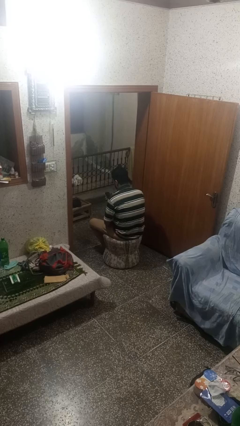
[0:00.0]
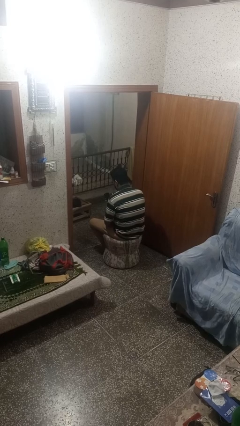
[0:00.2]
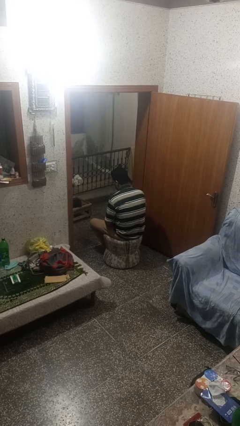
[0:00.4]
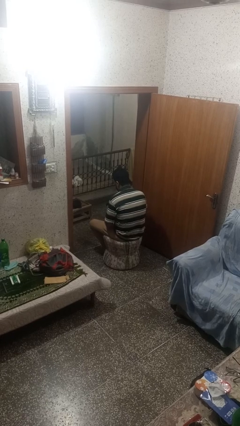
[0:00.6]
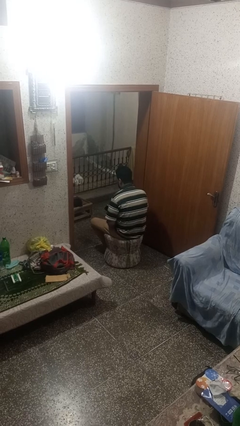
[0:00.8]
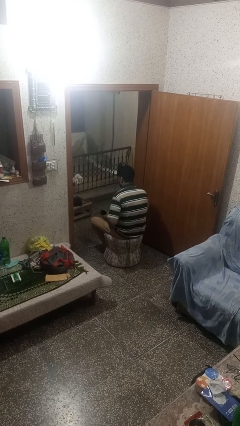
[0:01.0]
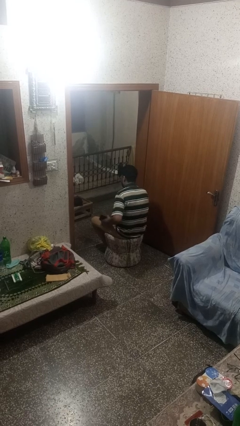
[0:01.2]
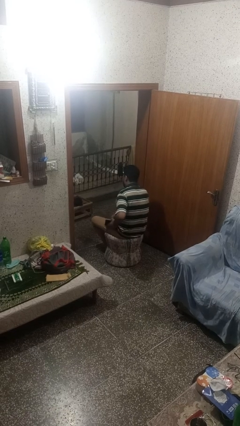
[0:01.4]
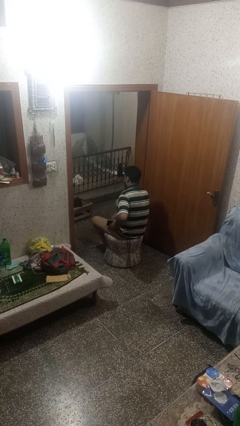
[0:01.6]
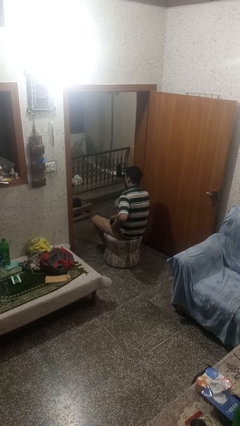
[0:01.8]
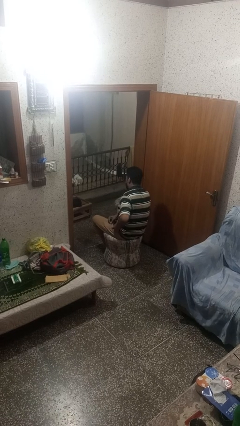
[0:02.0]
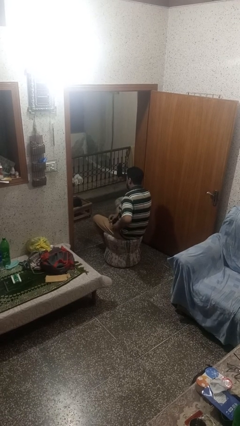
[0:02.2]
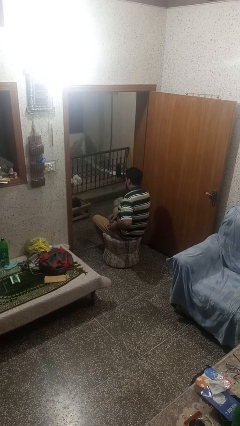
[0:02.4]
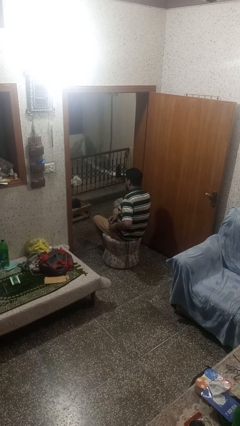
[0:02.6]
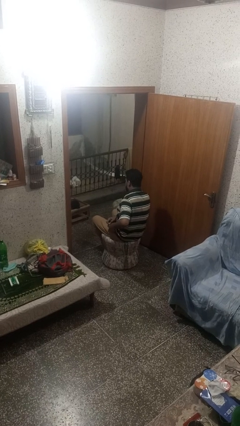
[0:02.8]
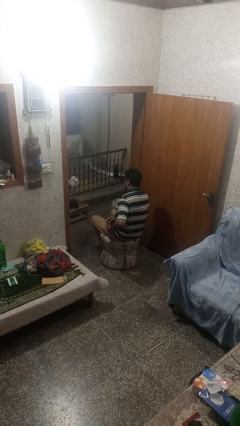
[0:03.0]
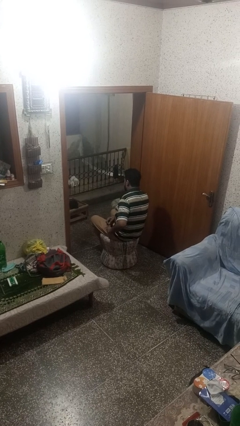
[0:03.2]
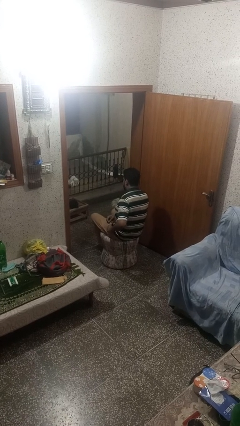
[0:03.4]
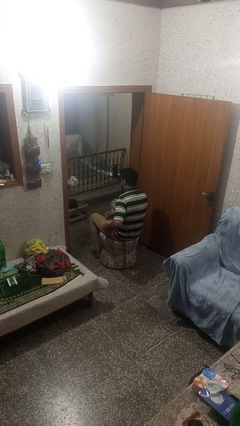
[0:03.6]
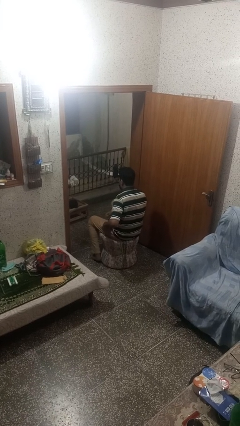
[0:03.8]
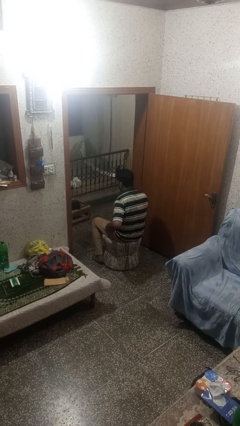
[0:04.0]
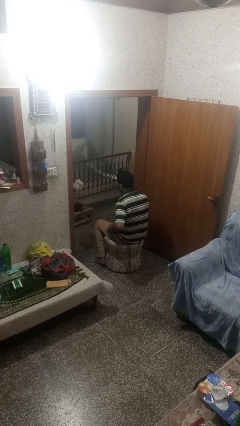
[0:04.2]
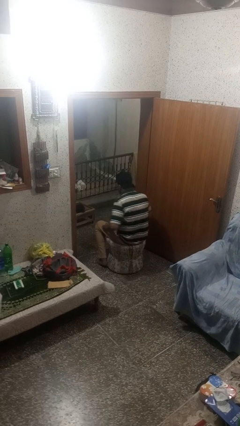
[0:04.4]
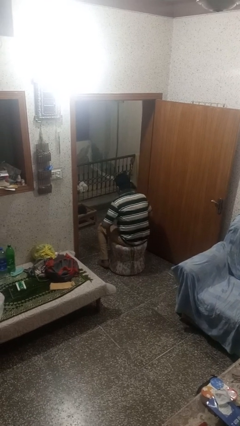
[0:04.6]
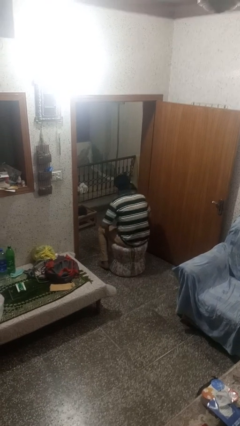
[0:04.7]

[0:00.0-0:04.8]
person puts phone into pocket

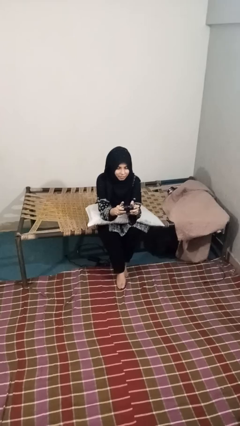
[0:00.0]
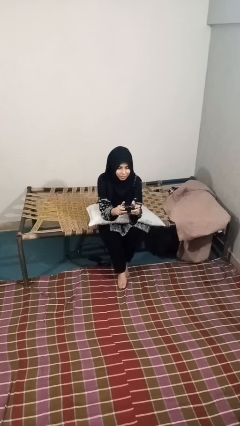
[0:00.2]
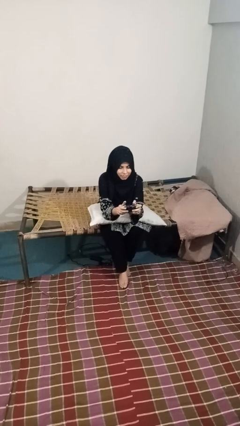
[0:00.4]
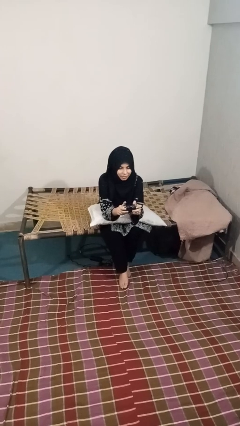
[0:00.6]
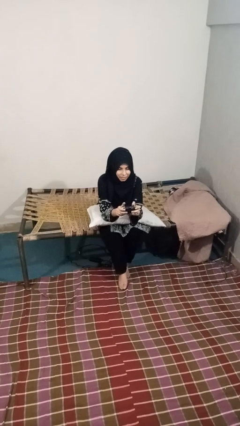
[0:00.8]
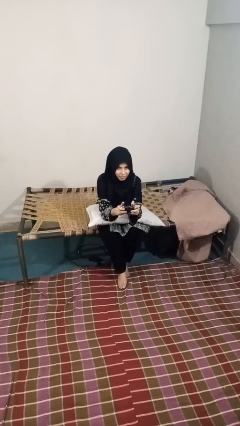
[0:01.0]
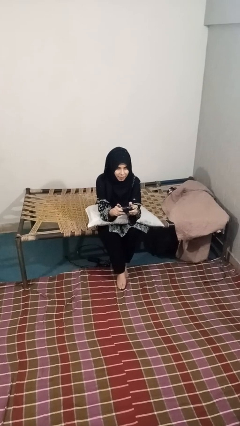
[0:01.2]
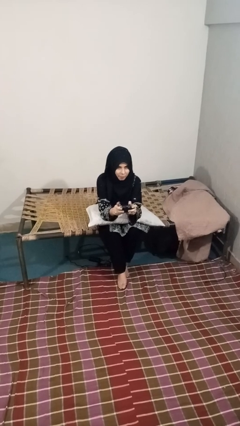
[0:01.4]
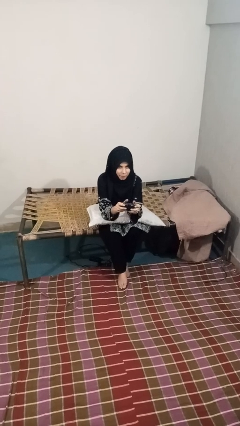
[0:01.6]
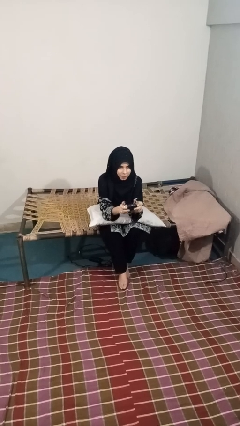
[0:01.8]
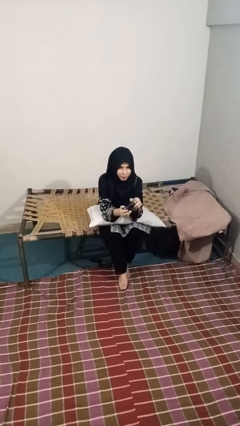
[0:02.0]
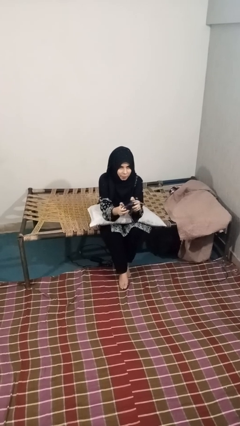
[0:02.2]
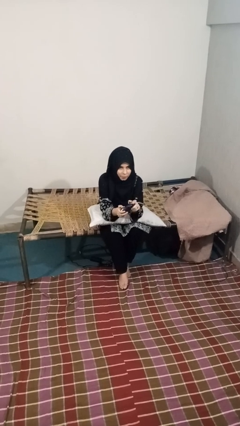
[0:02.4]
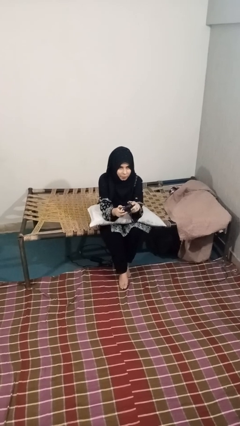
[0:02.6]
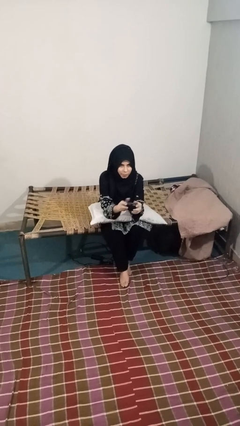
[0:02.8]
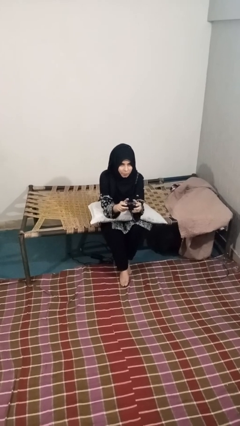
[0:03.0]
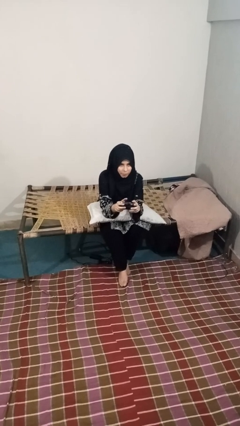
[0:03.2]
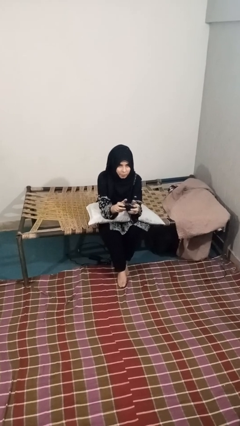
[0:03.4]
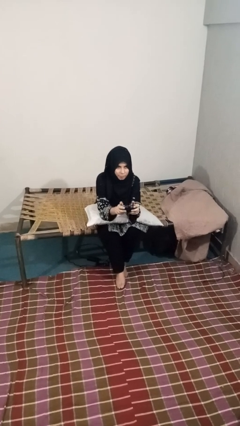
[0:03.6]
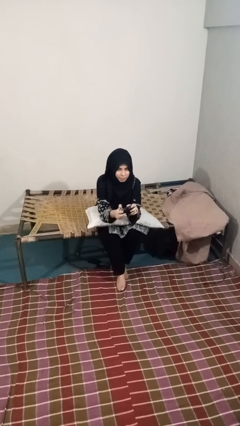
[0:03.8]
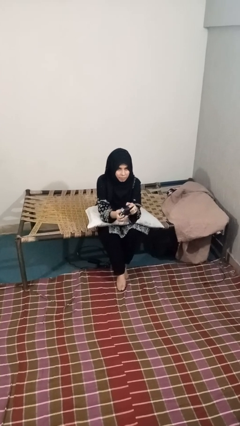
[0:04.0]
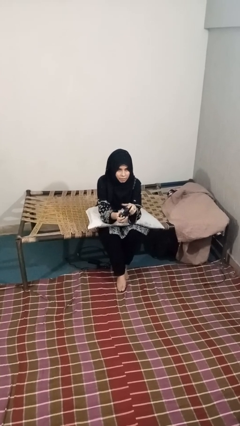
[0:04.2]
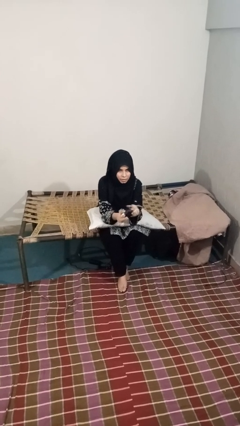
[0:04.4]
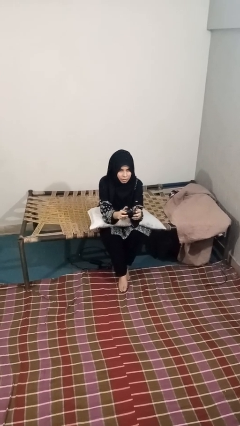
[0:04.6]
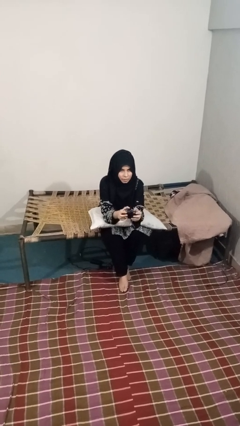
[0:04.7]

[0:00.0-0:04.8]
person interacts with handheld game

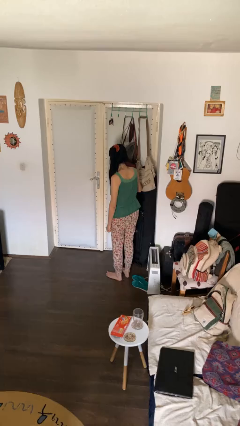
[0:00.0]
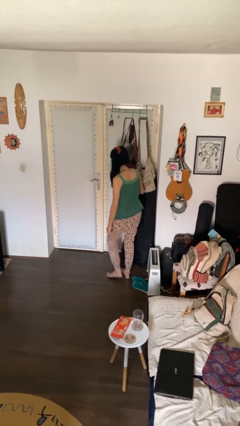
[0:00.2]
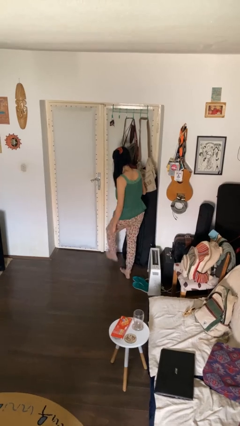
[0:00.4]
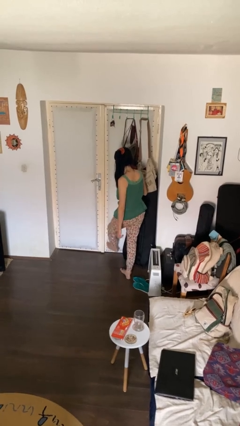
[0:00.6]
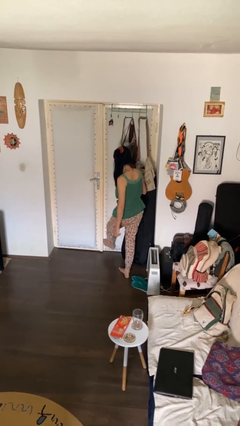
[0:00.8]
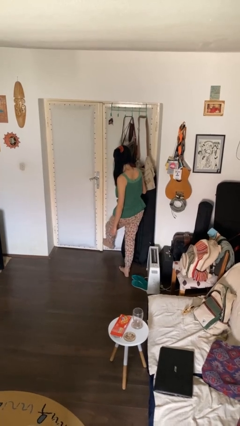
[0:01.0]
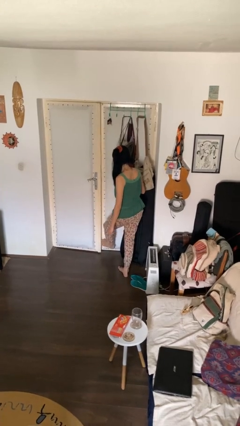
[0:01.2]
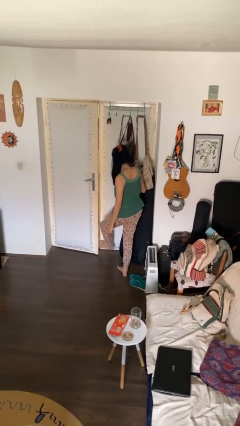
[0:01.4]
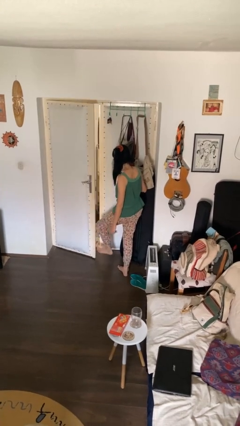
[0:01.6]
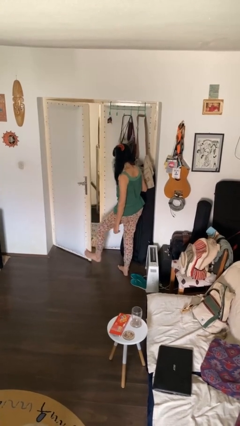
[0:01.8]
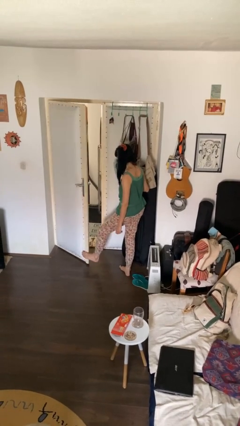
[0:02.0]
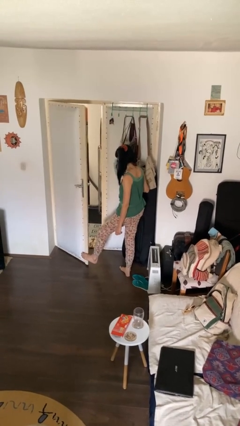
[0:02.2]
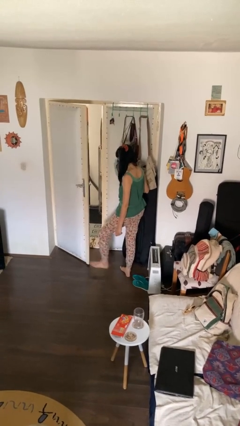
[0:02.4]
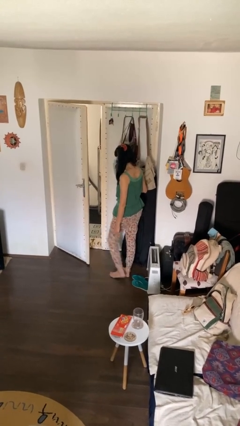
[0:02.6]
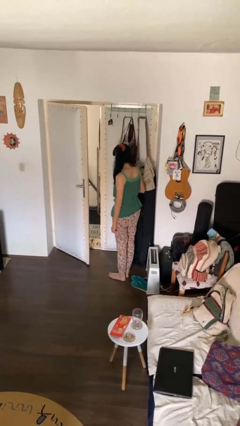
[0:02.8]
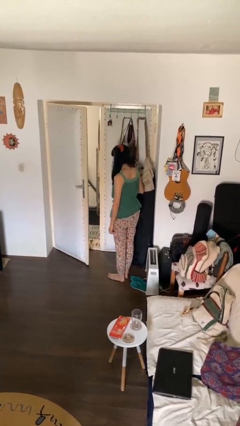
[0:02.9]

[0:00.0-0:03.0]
person opens facility door

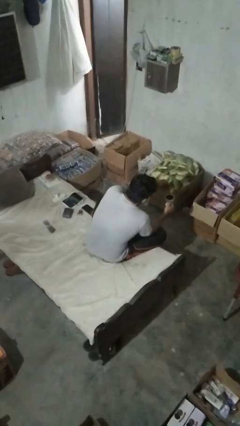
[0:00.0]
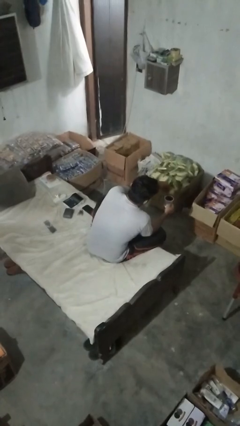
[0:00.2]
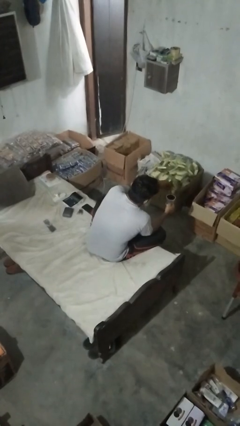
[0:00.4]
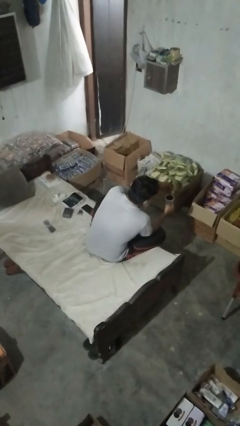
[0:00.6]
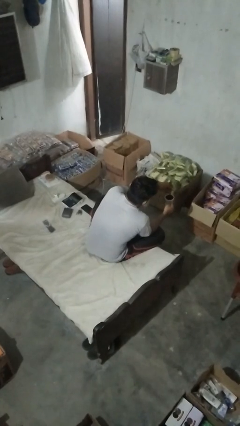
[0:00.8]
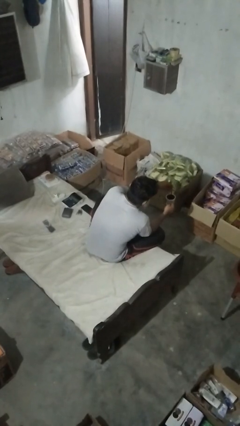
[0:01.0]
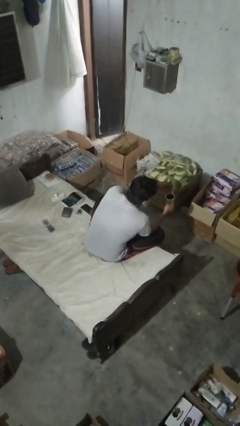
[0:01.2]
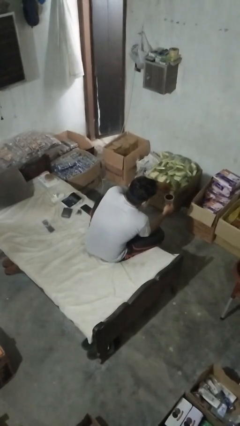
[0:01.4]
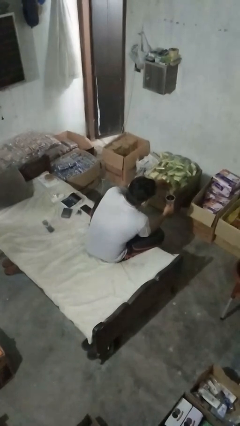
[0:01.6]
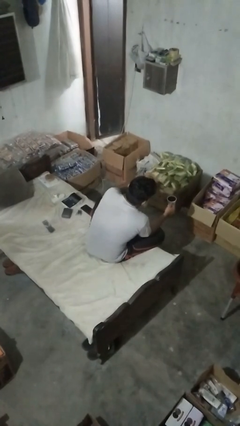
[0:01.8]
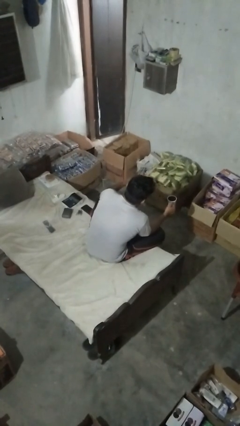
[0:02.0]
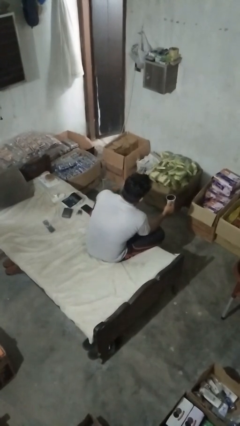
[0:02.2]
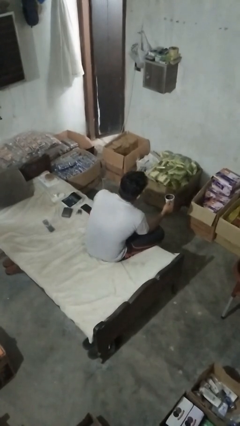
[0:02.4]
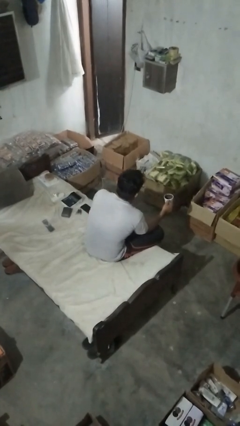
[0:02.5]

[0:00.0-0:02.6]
person stirs mug

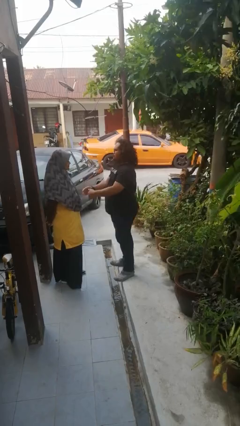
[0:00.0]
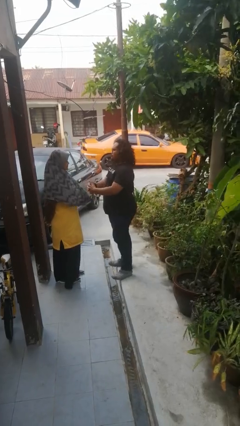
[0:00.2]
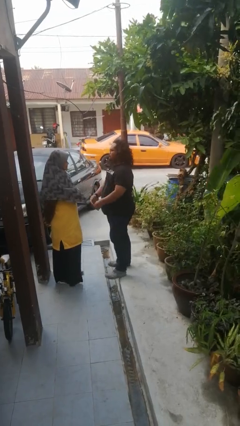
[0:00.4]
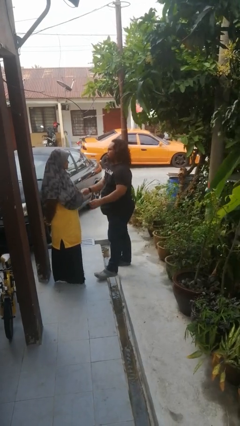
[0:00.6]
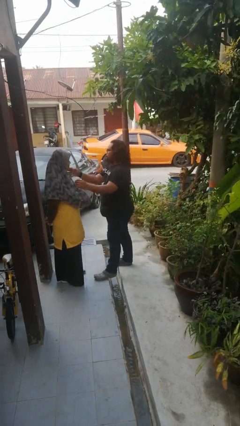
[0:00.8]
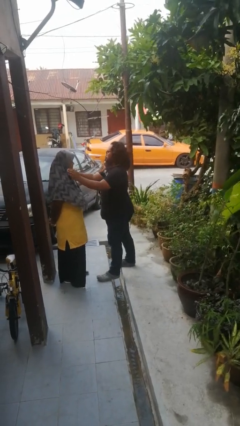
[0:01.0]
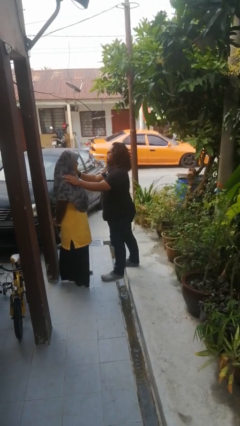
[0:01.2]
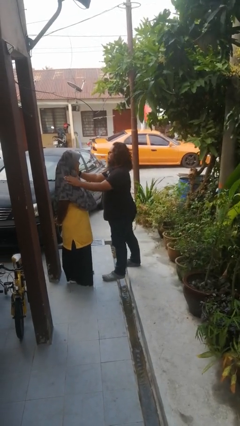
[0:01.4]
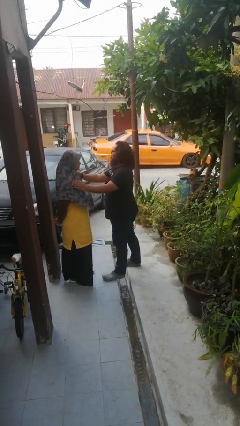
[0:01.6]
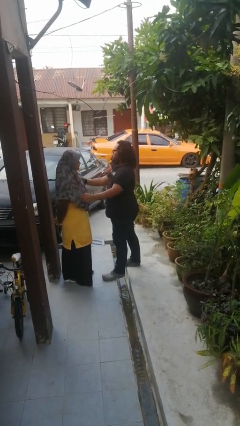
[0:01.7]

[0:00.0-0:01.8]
person pounds shoulders of person

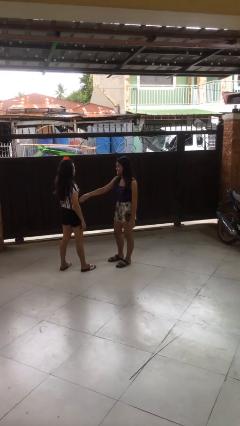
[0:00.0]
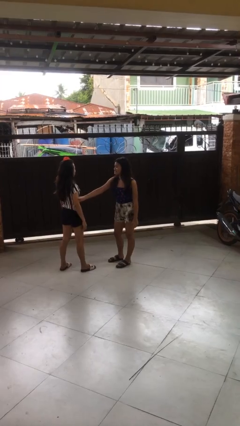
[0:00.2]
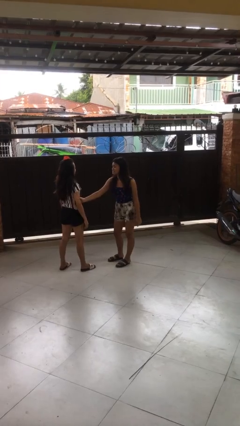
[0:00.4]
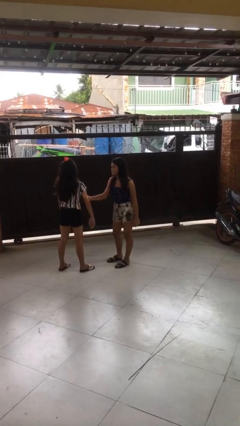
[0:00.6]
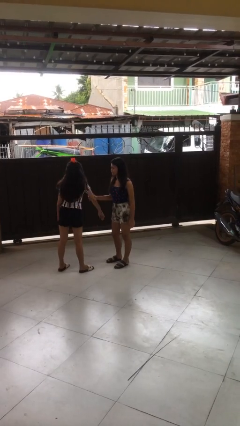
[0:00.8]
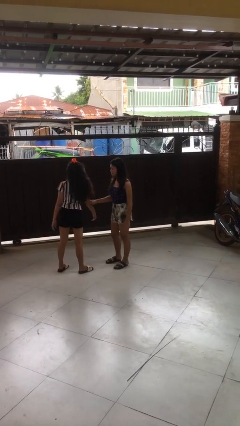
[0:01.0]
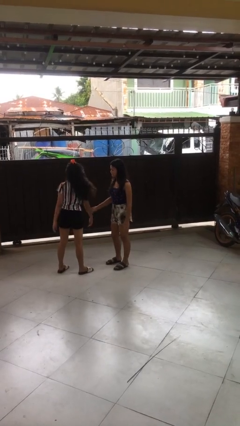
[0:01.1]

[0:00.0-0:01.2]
person grabs person by bicep
